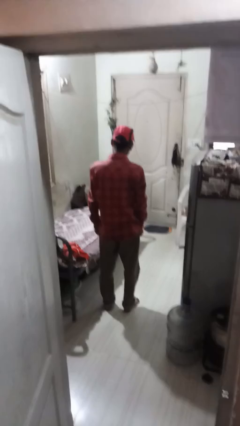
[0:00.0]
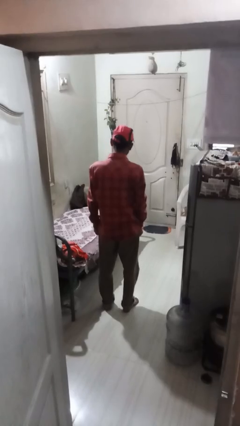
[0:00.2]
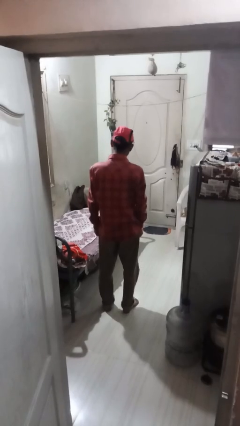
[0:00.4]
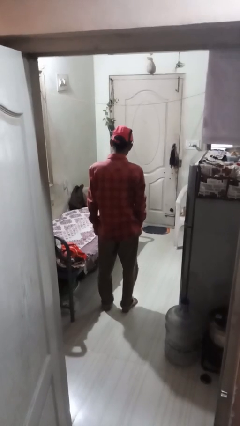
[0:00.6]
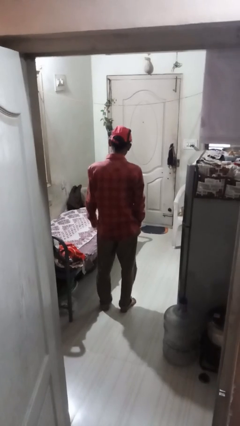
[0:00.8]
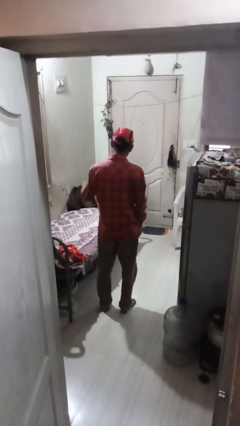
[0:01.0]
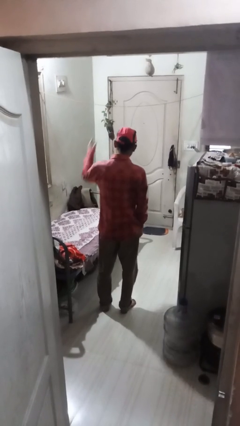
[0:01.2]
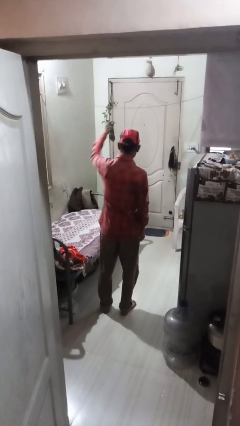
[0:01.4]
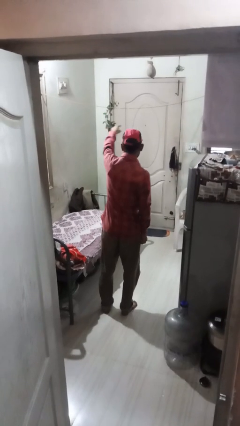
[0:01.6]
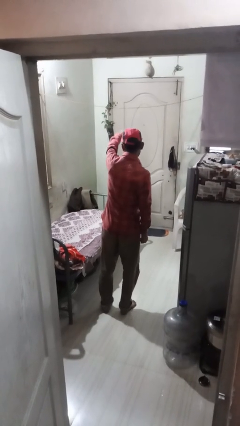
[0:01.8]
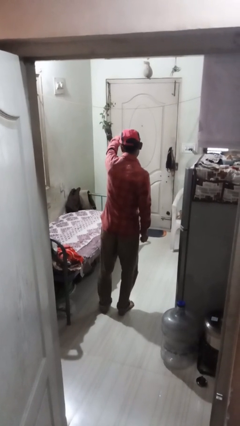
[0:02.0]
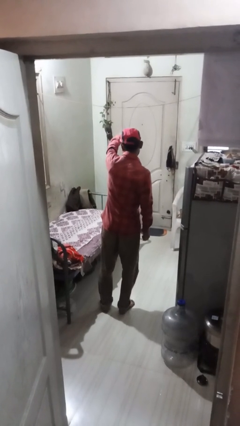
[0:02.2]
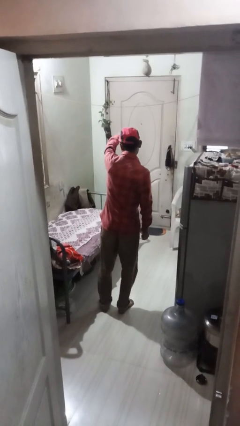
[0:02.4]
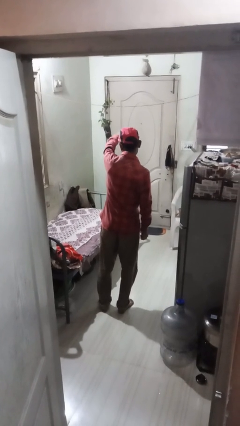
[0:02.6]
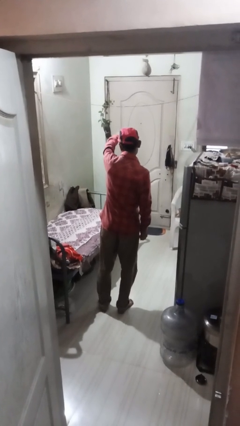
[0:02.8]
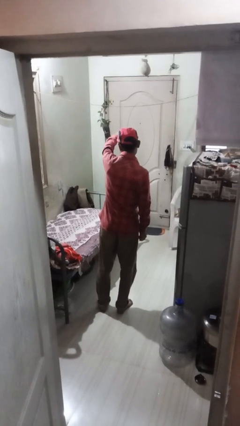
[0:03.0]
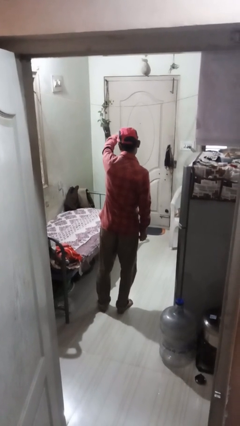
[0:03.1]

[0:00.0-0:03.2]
person points at person

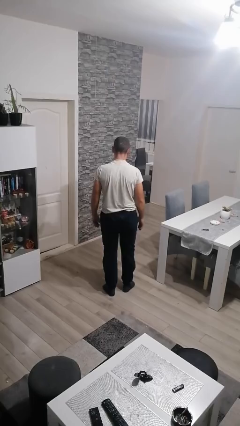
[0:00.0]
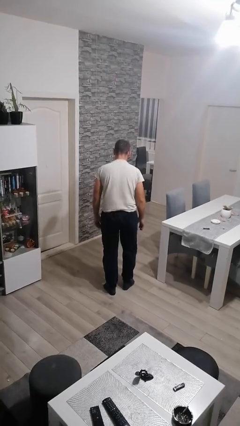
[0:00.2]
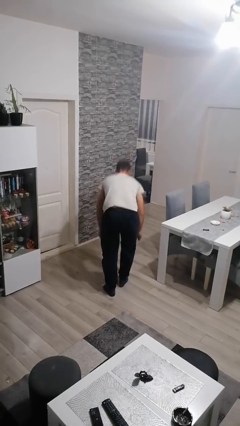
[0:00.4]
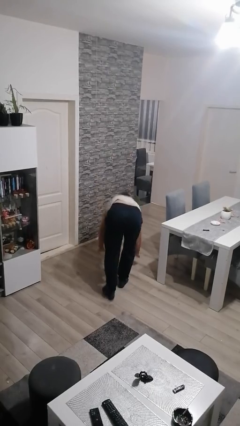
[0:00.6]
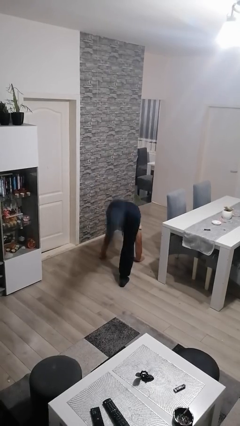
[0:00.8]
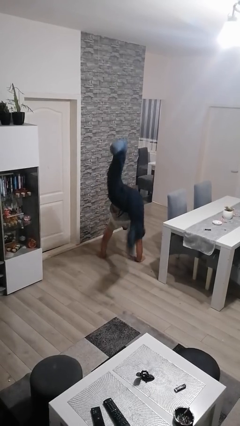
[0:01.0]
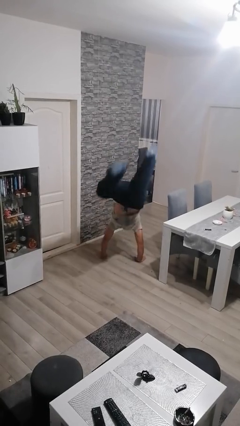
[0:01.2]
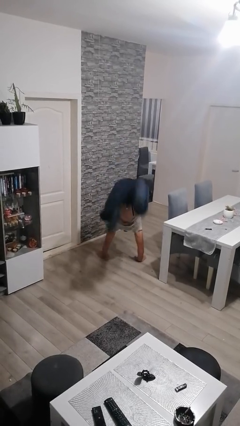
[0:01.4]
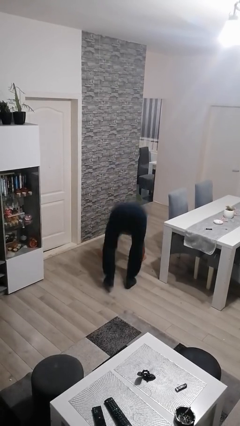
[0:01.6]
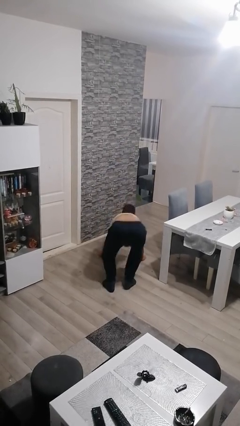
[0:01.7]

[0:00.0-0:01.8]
person handstand

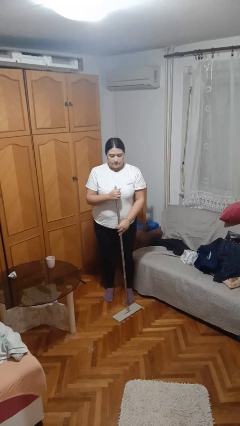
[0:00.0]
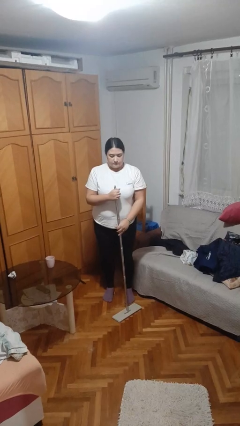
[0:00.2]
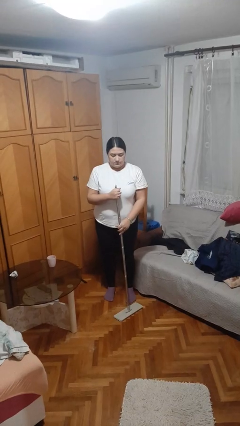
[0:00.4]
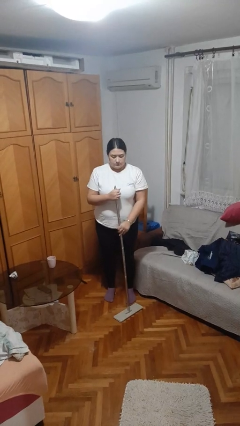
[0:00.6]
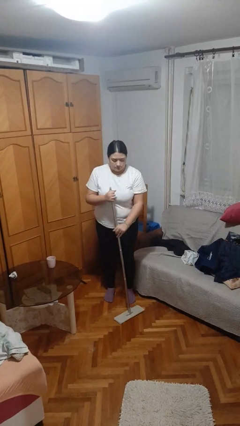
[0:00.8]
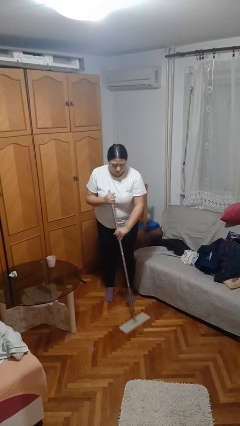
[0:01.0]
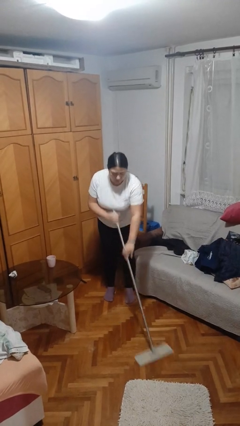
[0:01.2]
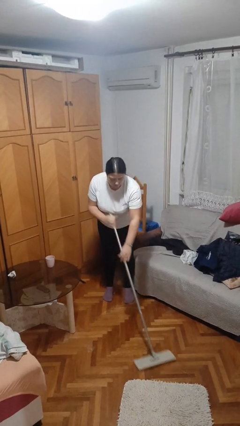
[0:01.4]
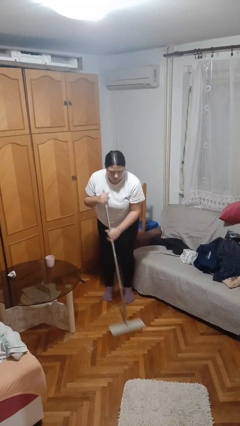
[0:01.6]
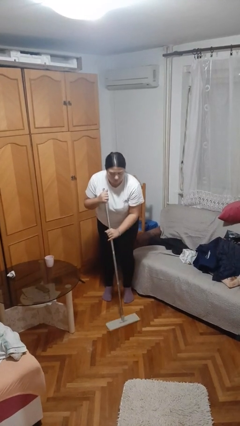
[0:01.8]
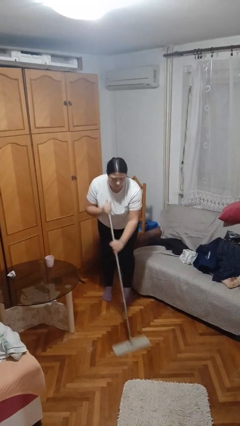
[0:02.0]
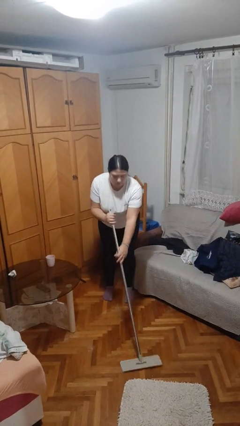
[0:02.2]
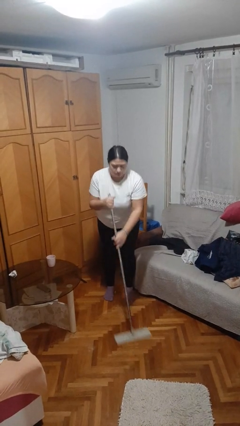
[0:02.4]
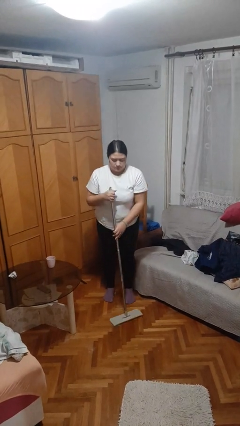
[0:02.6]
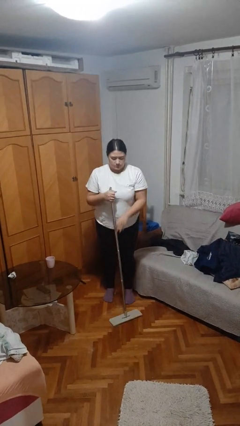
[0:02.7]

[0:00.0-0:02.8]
person mops

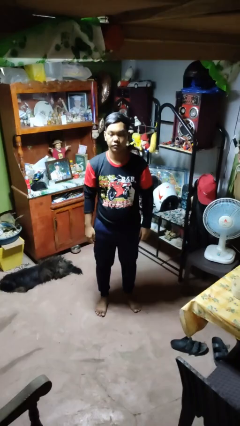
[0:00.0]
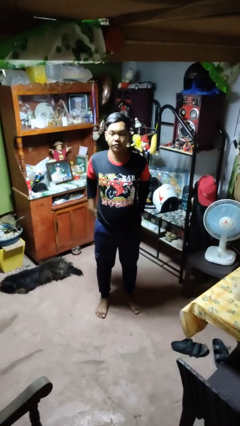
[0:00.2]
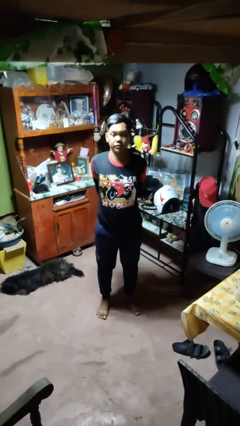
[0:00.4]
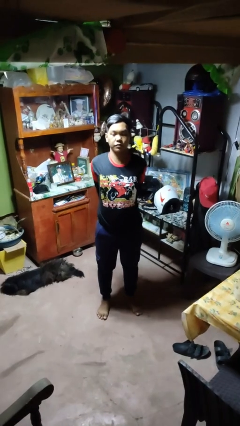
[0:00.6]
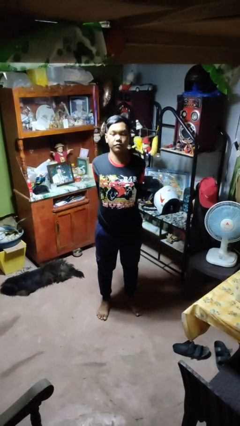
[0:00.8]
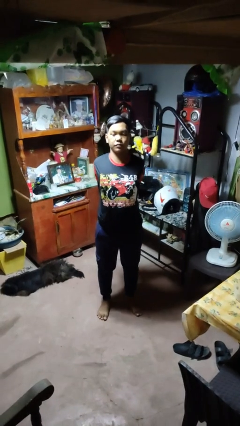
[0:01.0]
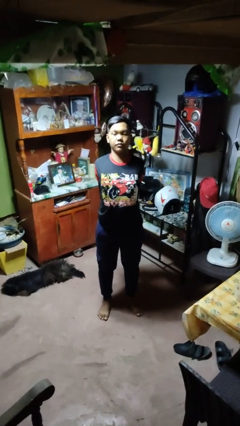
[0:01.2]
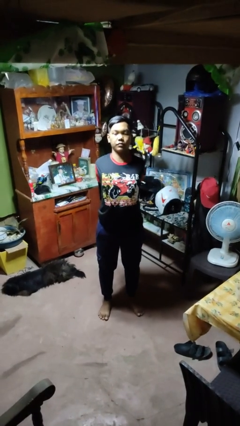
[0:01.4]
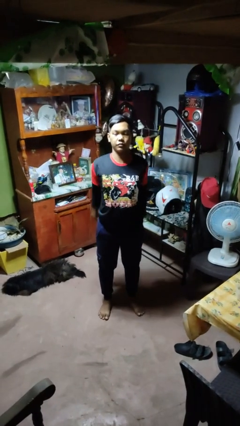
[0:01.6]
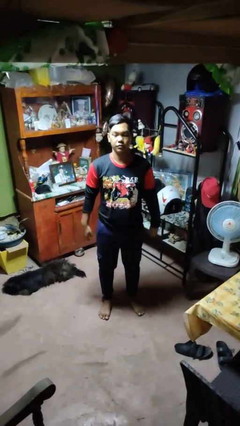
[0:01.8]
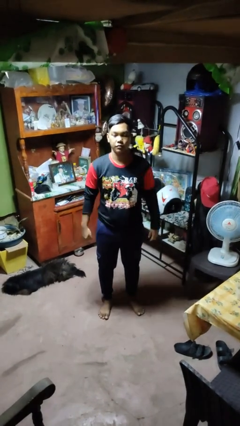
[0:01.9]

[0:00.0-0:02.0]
person stretches back

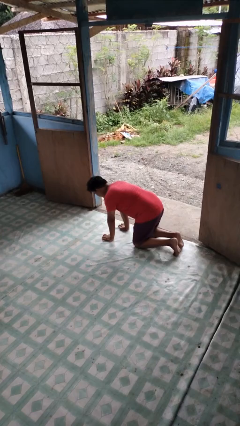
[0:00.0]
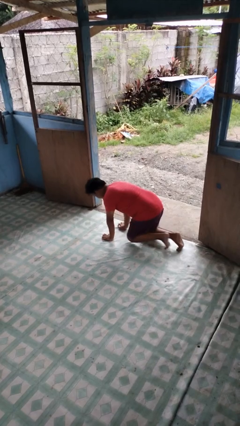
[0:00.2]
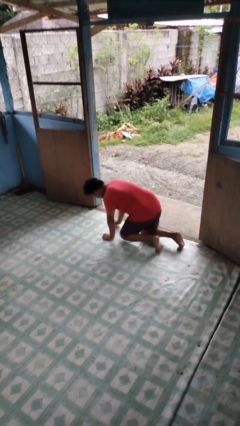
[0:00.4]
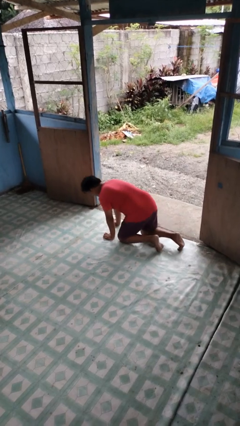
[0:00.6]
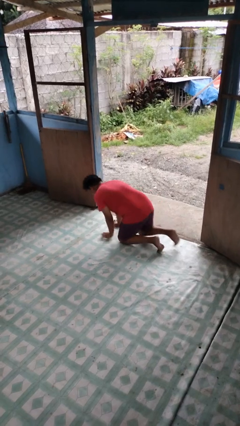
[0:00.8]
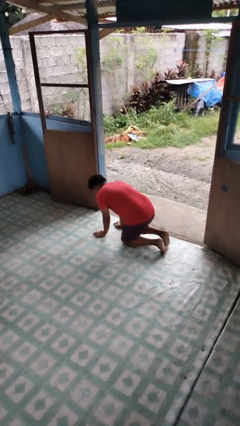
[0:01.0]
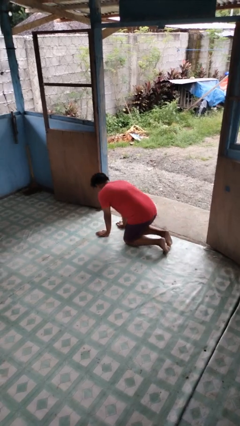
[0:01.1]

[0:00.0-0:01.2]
person crawls

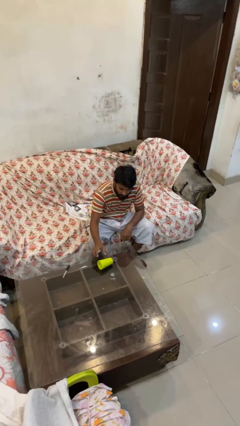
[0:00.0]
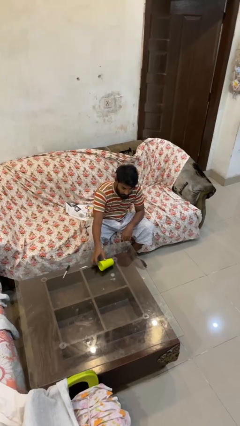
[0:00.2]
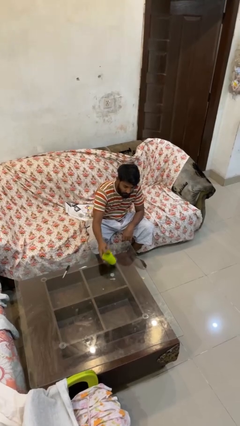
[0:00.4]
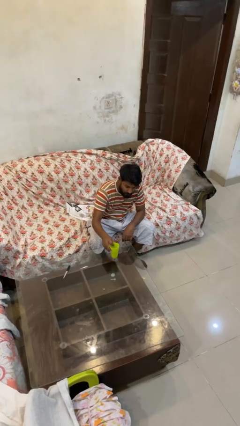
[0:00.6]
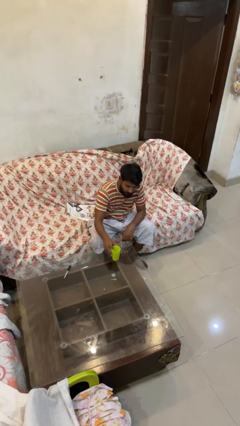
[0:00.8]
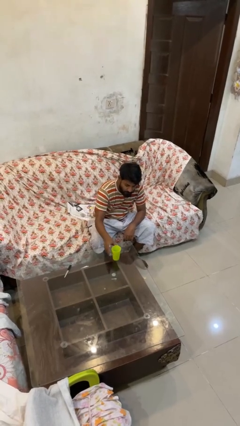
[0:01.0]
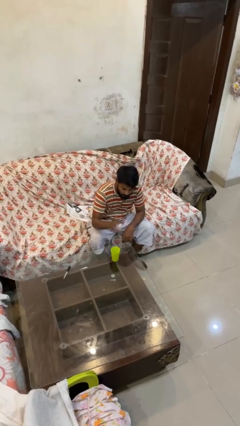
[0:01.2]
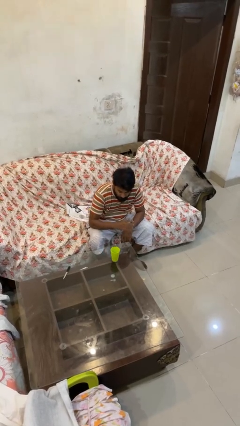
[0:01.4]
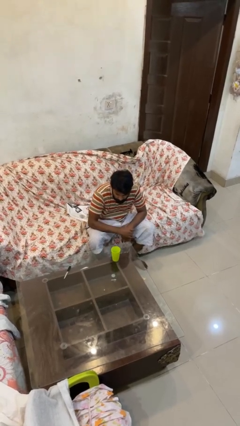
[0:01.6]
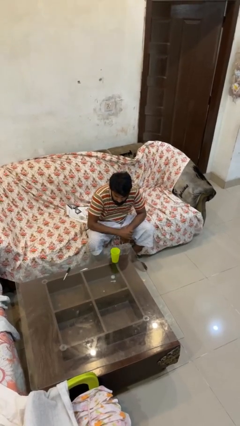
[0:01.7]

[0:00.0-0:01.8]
person sets upright glass

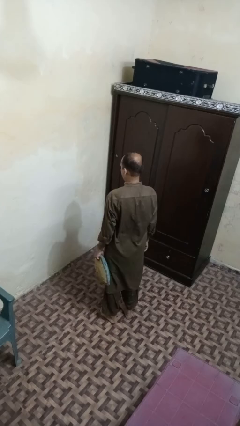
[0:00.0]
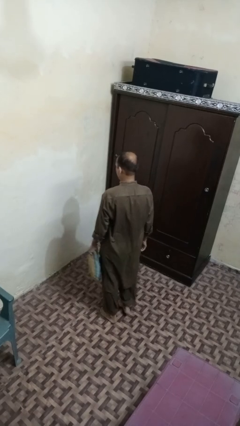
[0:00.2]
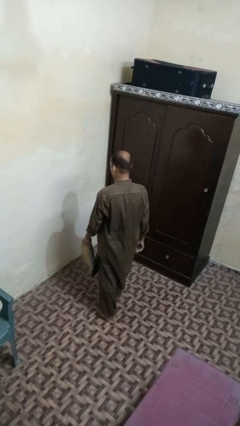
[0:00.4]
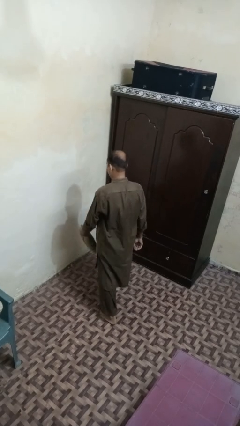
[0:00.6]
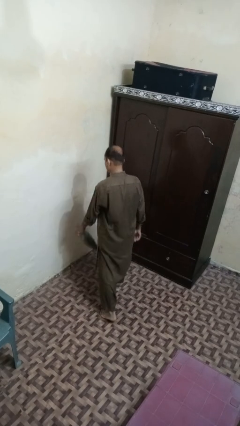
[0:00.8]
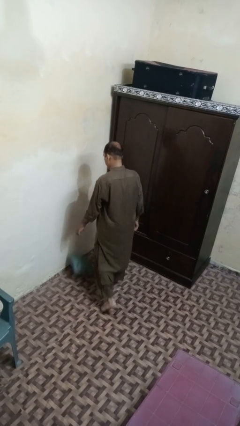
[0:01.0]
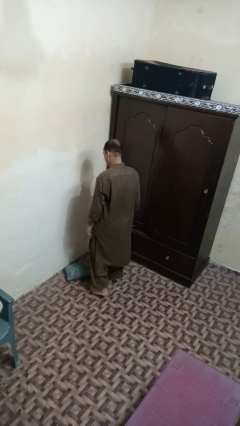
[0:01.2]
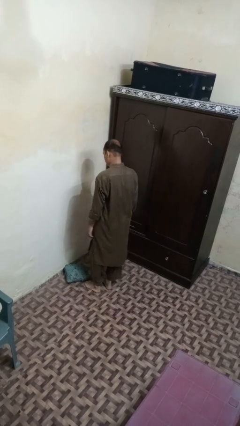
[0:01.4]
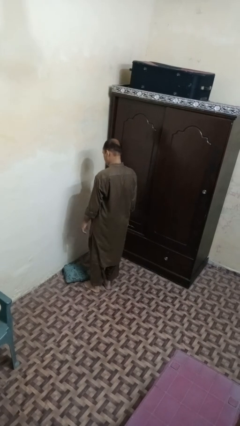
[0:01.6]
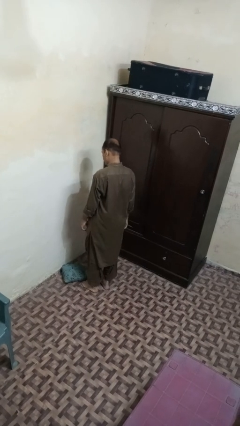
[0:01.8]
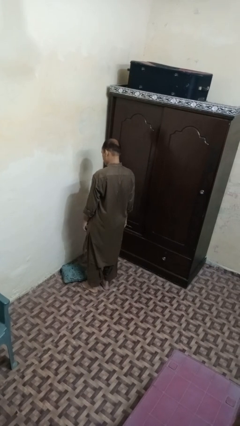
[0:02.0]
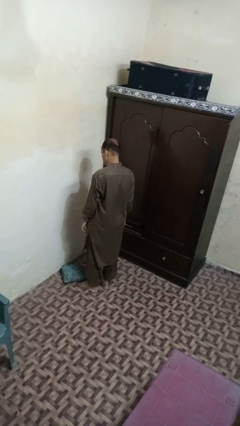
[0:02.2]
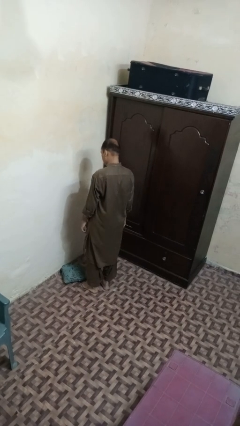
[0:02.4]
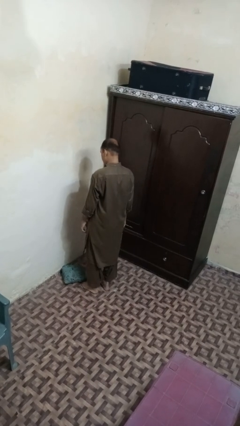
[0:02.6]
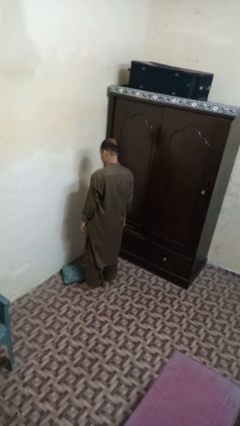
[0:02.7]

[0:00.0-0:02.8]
person throws object to ground

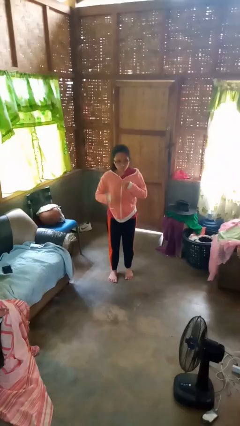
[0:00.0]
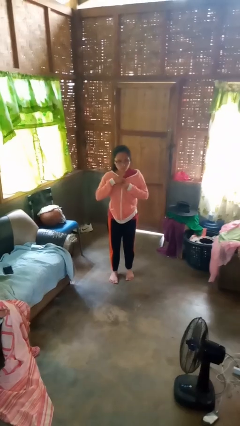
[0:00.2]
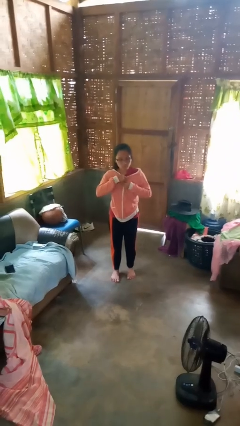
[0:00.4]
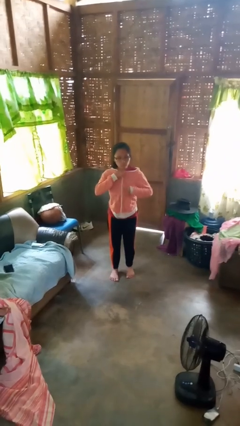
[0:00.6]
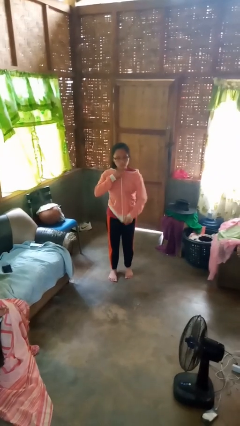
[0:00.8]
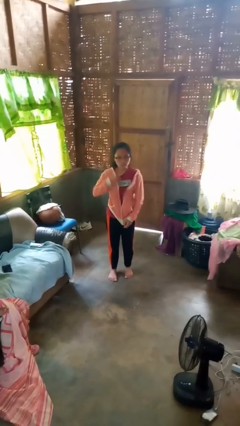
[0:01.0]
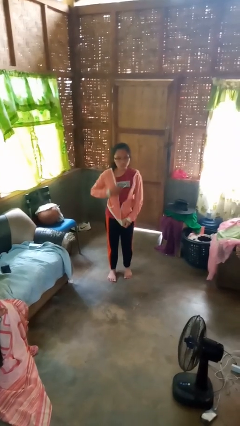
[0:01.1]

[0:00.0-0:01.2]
person unzips jacket
